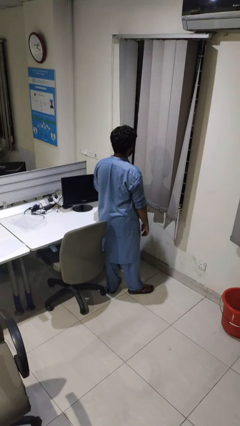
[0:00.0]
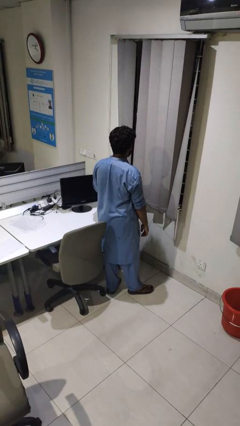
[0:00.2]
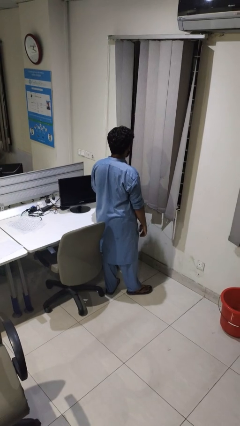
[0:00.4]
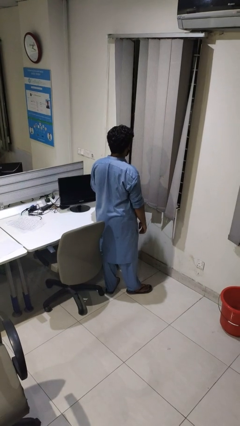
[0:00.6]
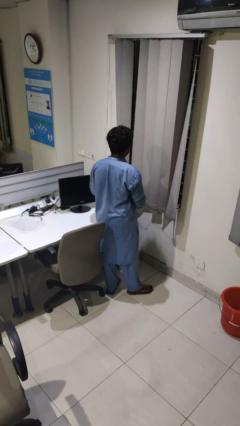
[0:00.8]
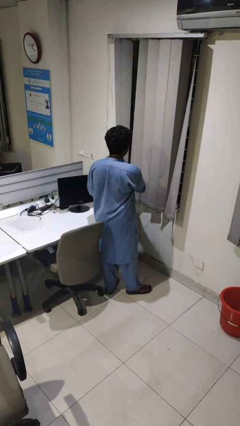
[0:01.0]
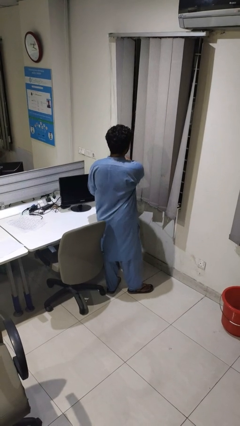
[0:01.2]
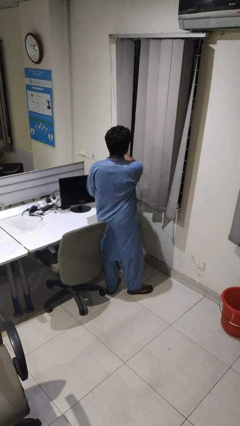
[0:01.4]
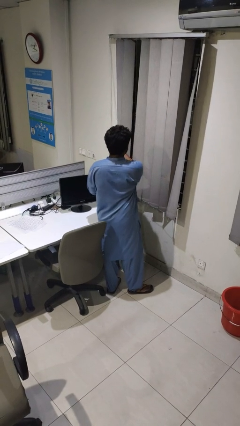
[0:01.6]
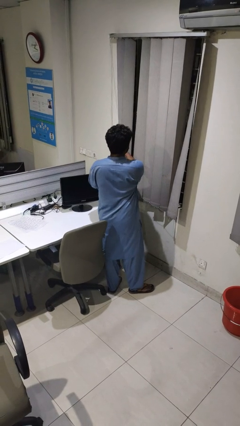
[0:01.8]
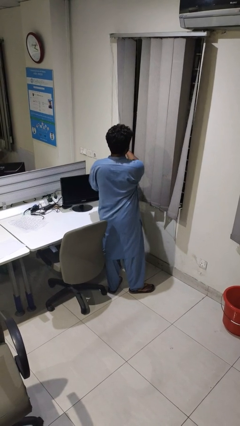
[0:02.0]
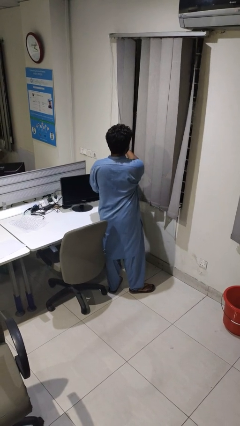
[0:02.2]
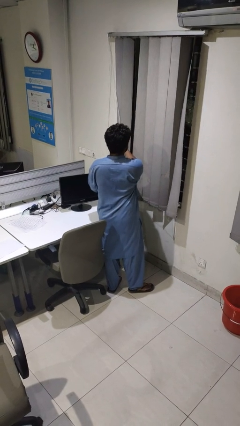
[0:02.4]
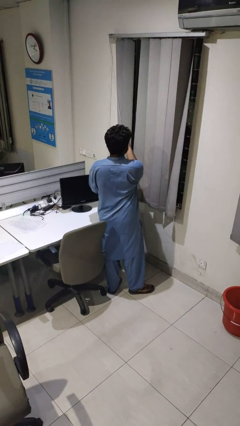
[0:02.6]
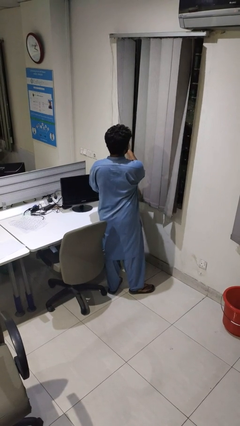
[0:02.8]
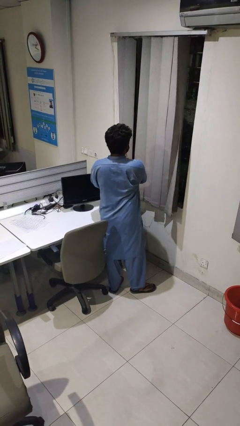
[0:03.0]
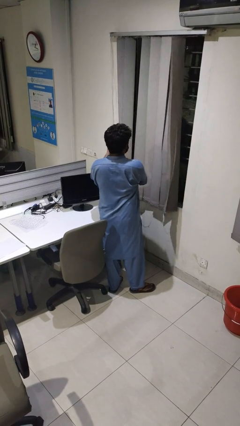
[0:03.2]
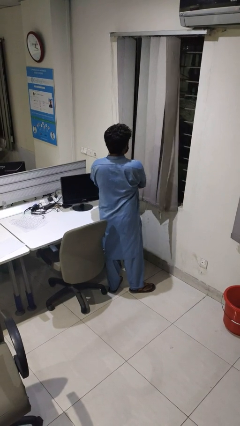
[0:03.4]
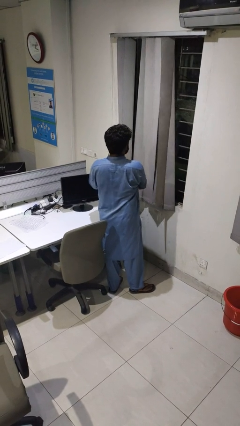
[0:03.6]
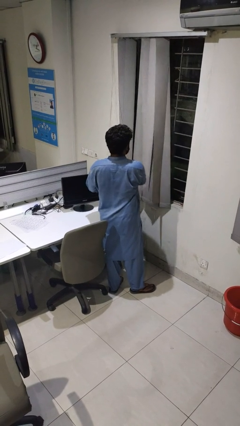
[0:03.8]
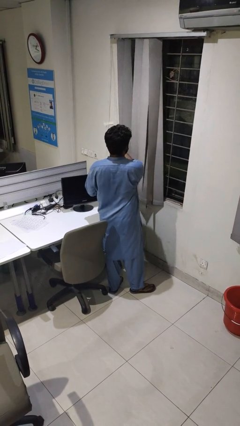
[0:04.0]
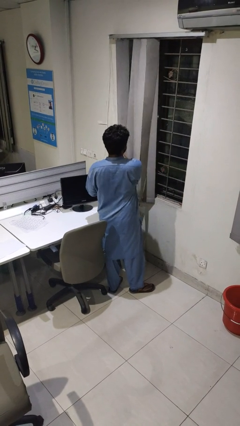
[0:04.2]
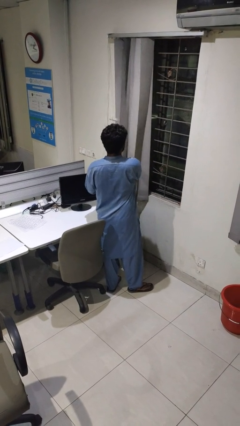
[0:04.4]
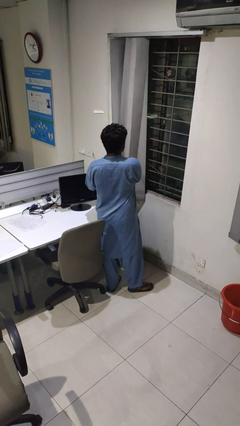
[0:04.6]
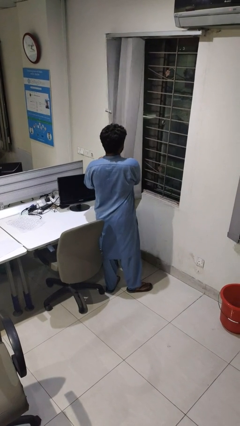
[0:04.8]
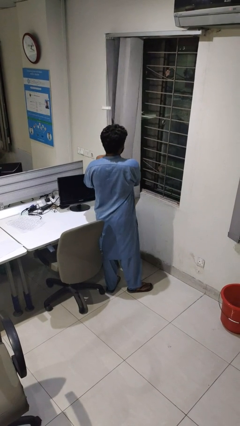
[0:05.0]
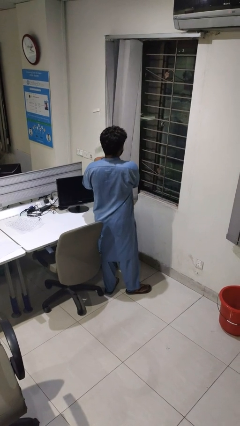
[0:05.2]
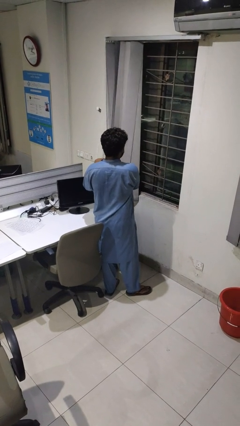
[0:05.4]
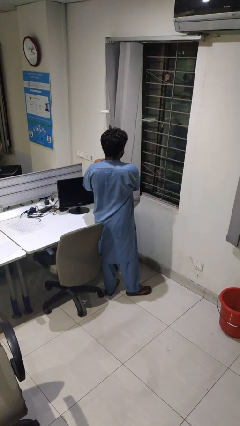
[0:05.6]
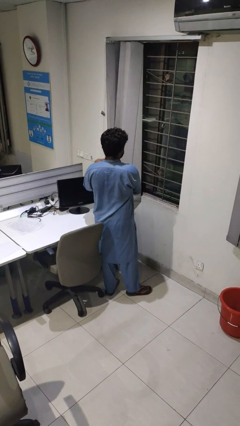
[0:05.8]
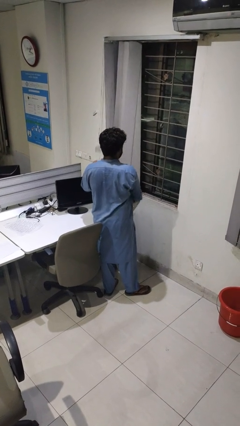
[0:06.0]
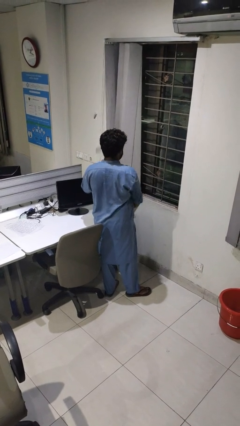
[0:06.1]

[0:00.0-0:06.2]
person opens curtains

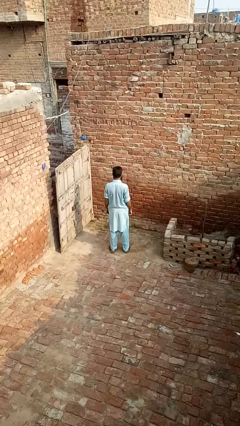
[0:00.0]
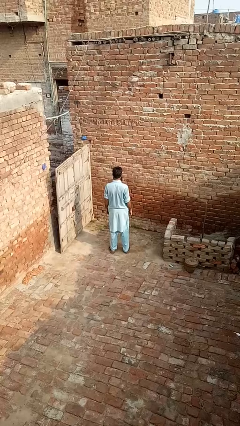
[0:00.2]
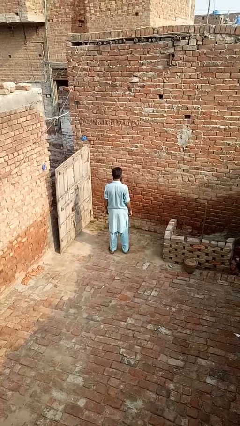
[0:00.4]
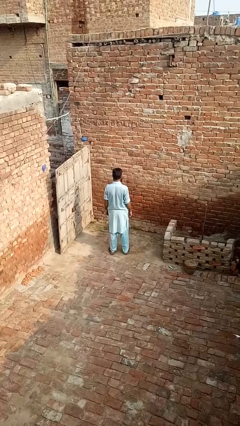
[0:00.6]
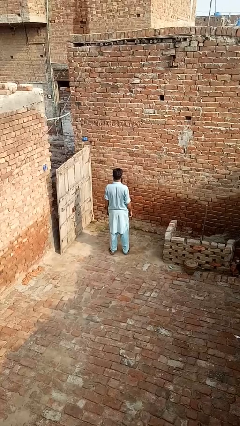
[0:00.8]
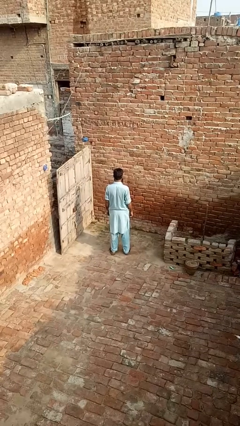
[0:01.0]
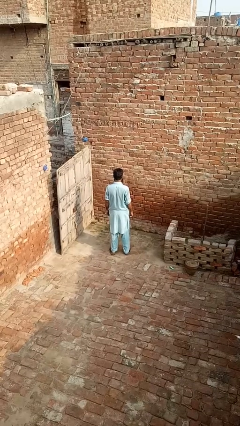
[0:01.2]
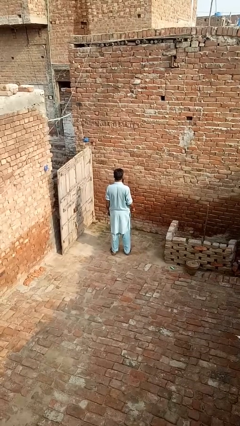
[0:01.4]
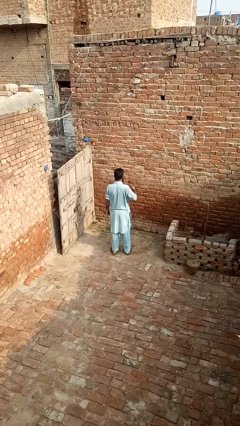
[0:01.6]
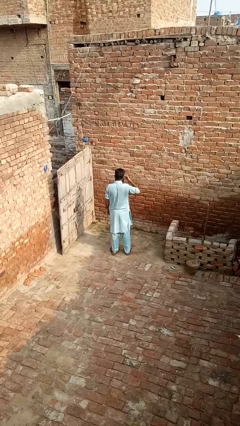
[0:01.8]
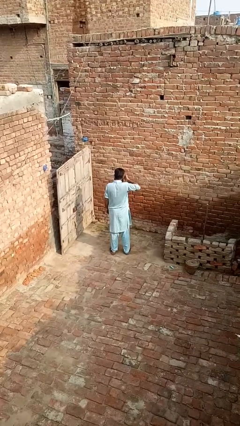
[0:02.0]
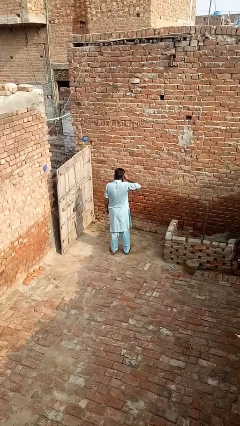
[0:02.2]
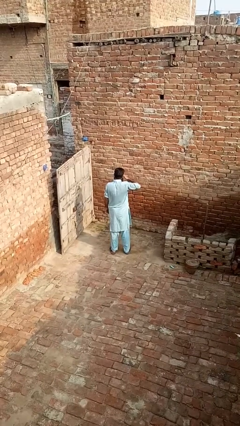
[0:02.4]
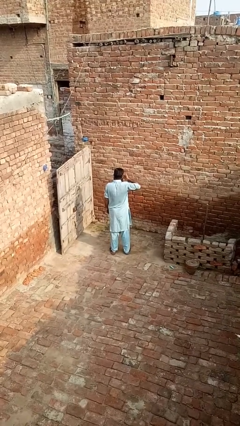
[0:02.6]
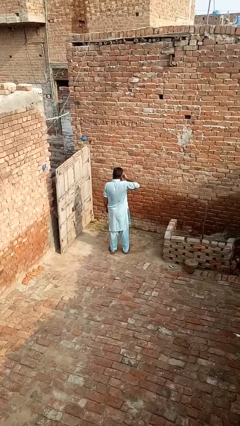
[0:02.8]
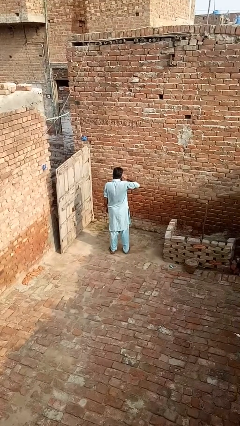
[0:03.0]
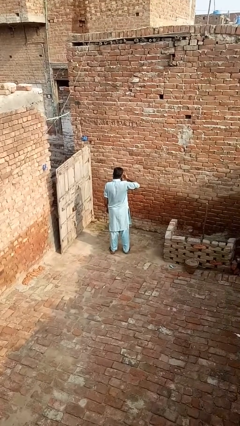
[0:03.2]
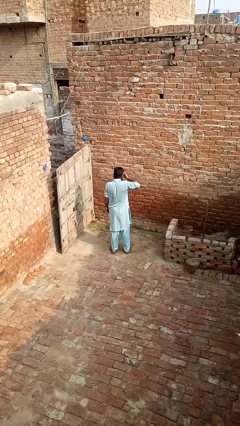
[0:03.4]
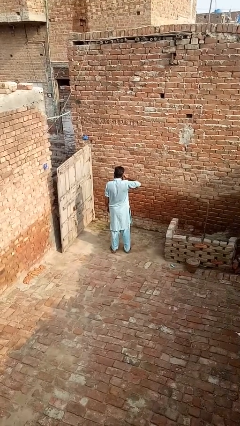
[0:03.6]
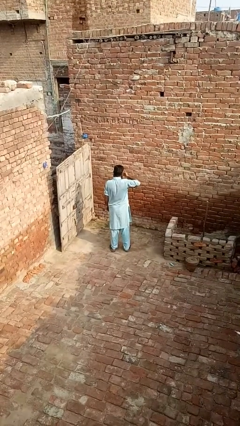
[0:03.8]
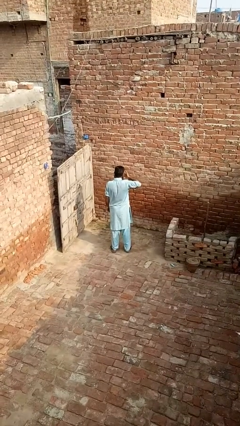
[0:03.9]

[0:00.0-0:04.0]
person rubs eyes

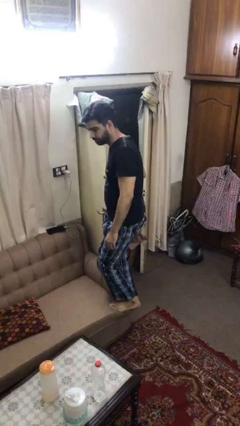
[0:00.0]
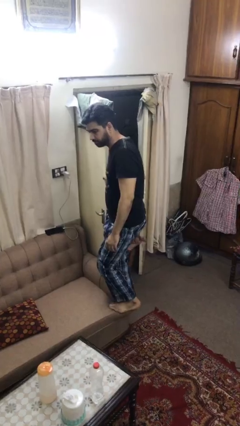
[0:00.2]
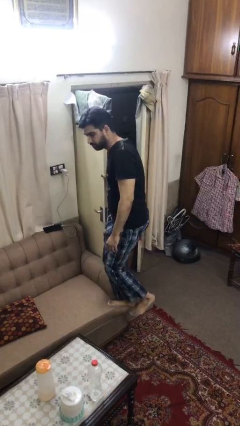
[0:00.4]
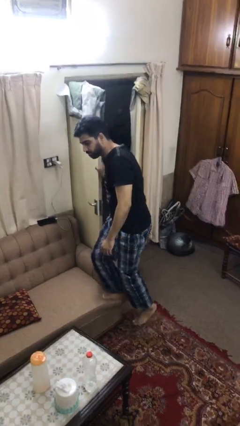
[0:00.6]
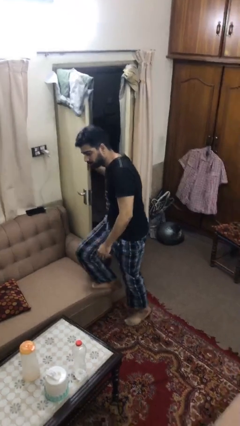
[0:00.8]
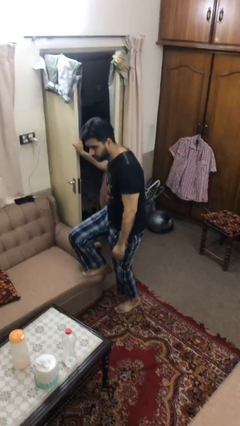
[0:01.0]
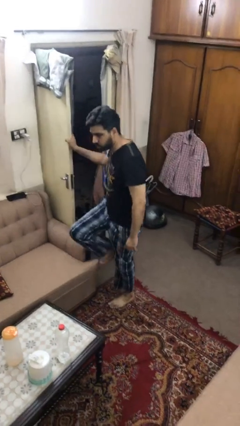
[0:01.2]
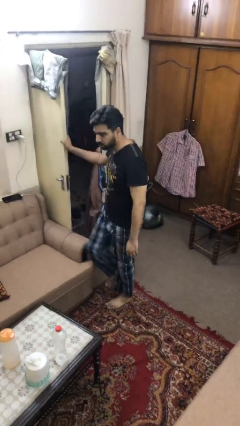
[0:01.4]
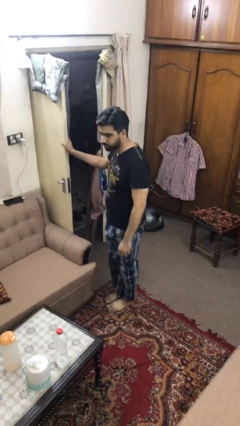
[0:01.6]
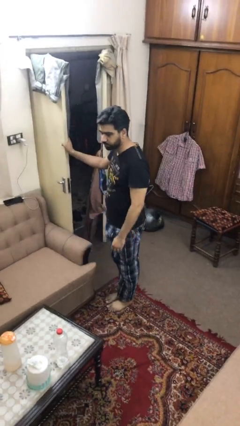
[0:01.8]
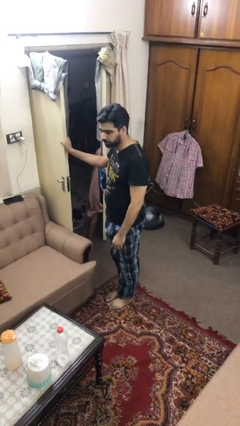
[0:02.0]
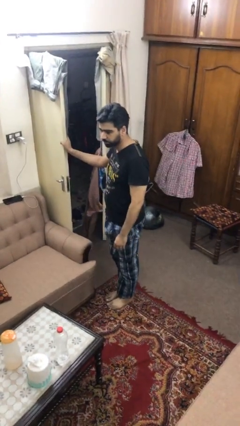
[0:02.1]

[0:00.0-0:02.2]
person climbs off couch

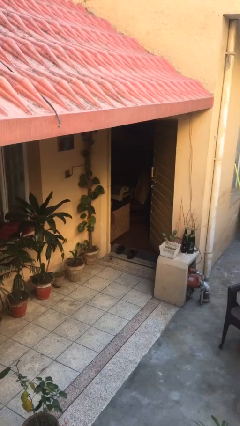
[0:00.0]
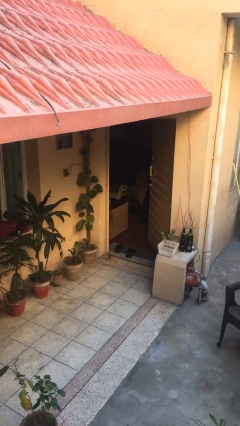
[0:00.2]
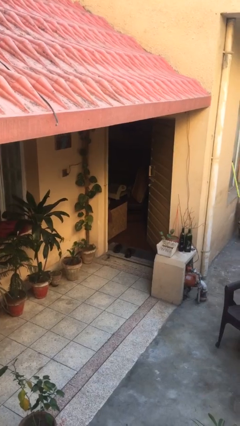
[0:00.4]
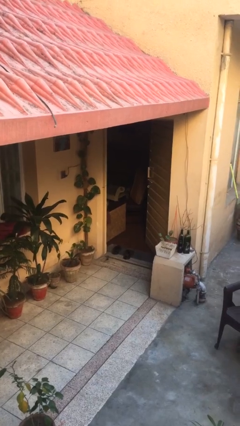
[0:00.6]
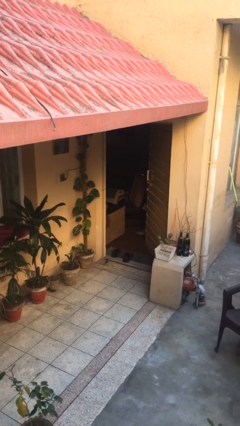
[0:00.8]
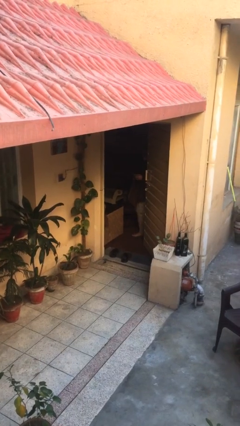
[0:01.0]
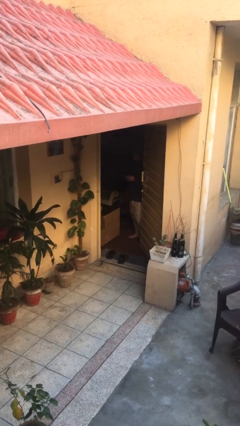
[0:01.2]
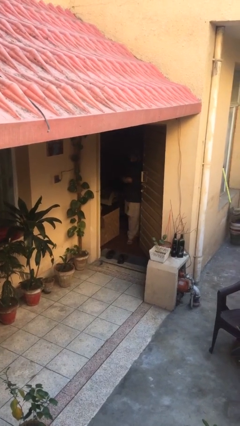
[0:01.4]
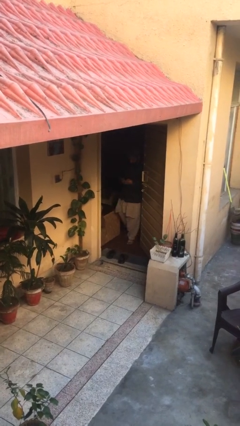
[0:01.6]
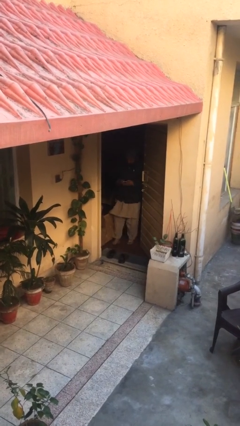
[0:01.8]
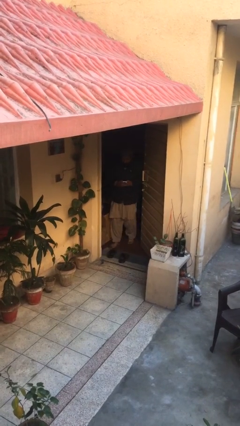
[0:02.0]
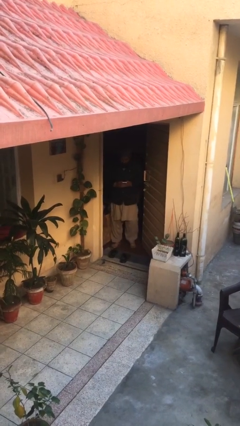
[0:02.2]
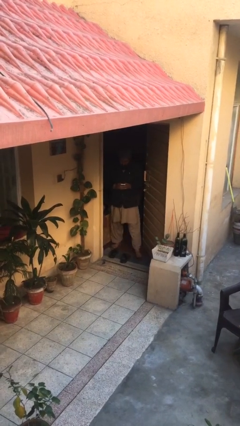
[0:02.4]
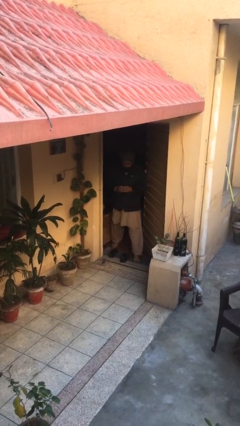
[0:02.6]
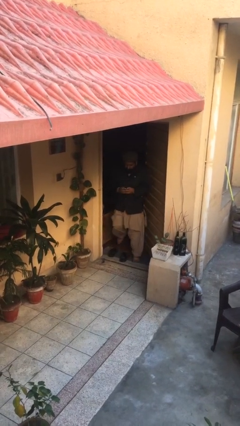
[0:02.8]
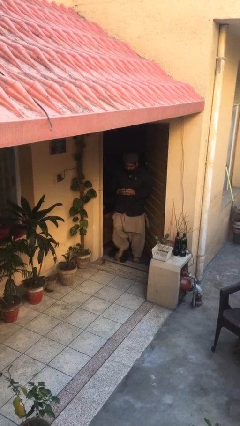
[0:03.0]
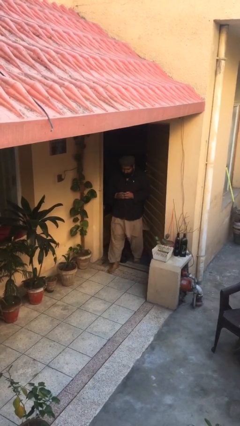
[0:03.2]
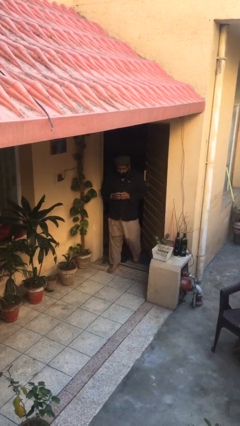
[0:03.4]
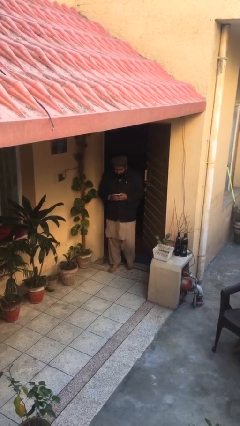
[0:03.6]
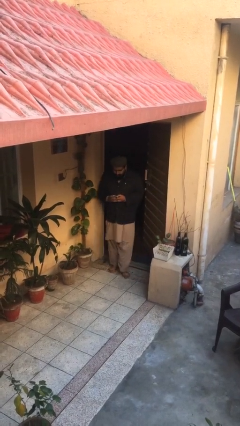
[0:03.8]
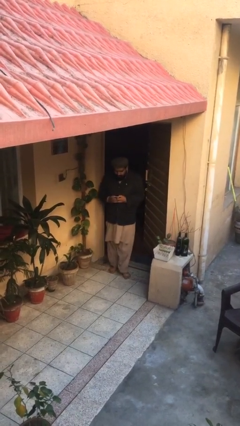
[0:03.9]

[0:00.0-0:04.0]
person enters scene through structure

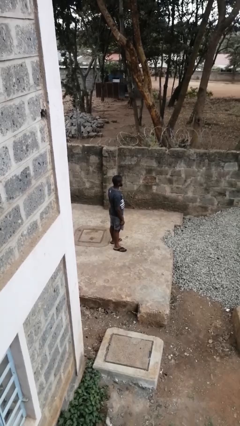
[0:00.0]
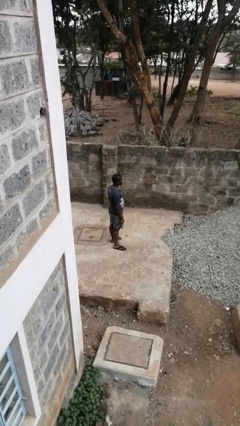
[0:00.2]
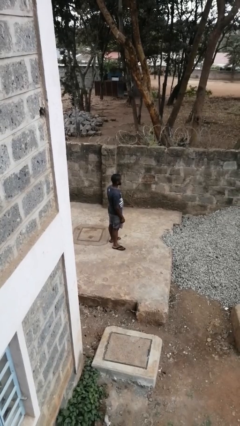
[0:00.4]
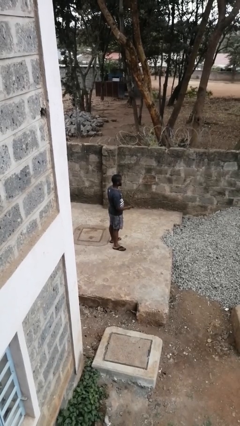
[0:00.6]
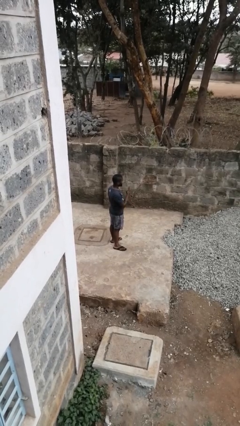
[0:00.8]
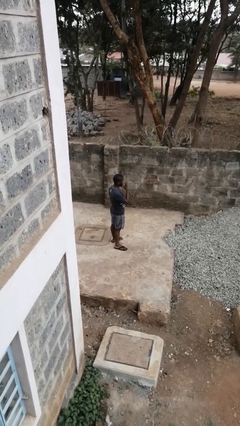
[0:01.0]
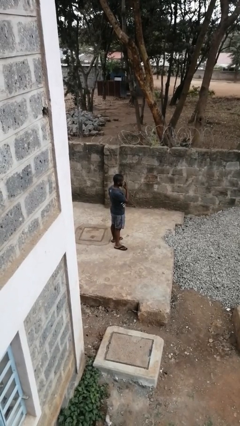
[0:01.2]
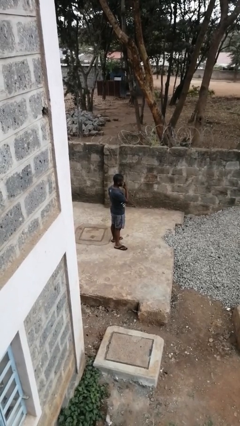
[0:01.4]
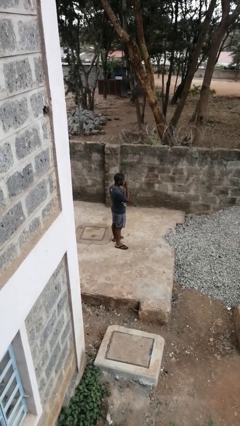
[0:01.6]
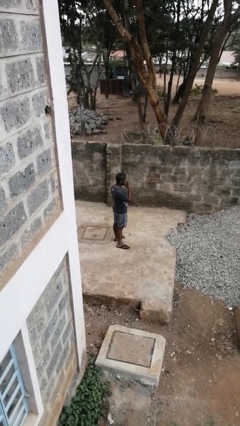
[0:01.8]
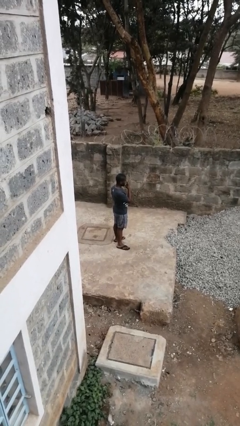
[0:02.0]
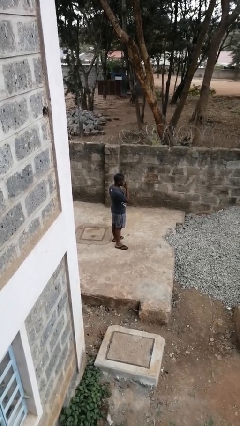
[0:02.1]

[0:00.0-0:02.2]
person gestures watch closely
